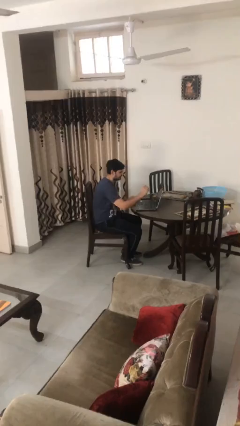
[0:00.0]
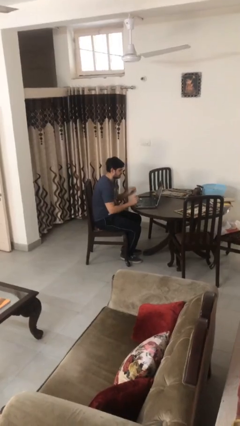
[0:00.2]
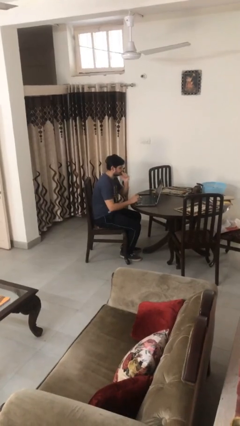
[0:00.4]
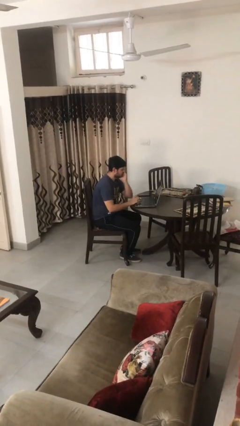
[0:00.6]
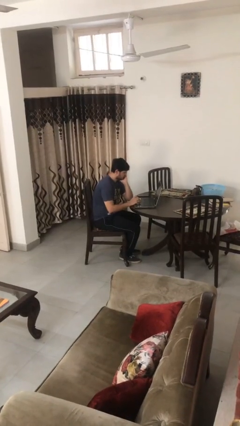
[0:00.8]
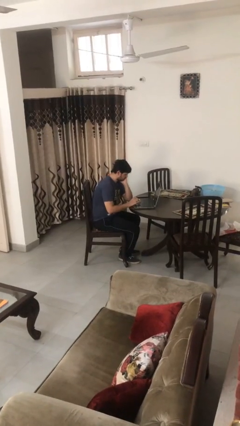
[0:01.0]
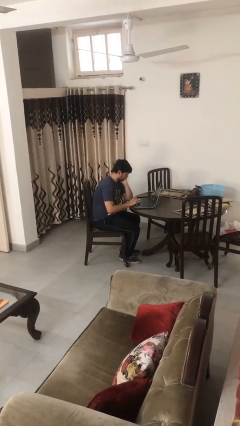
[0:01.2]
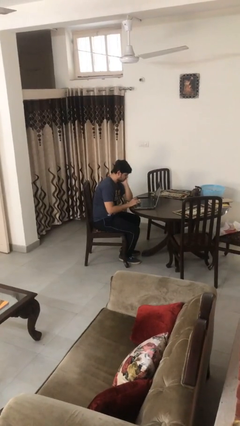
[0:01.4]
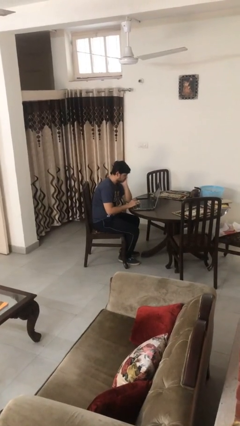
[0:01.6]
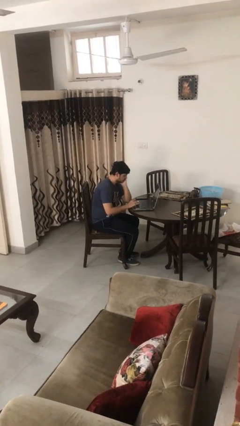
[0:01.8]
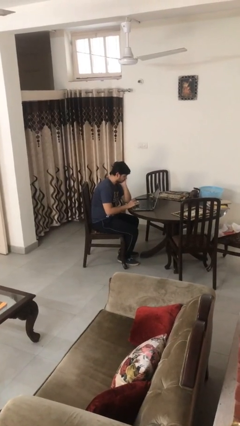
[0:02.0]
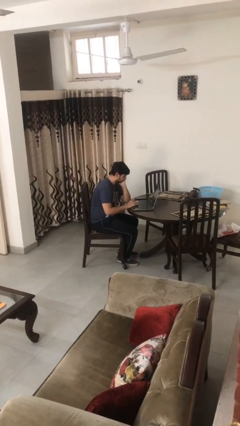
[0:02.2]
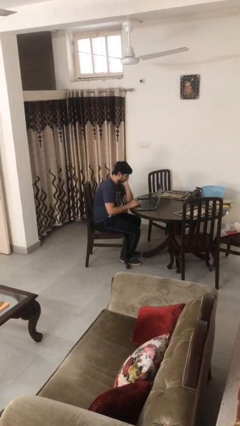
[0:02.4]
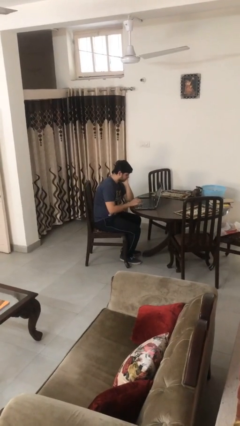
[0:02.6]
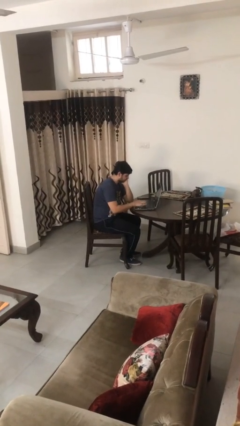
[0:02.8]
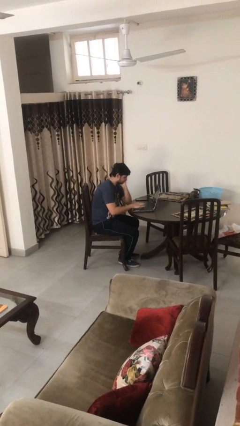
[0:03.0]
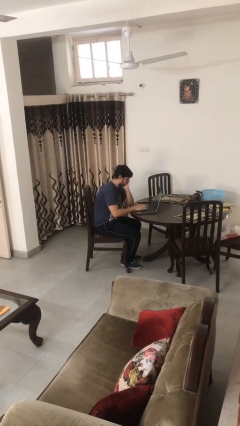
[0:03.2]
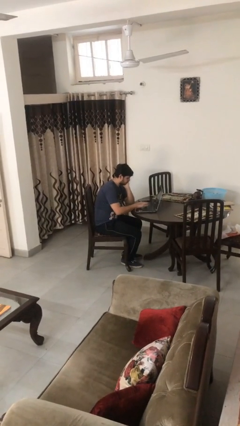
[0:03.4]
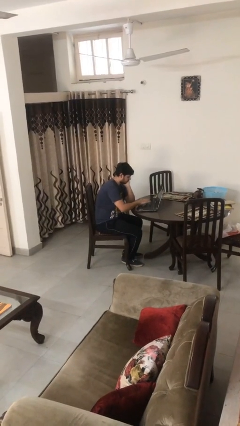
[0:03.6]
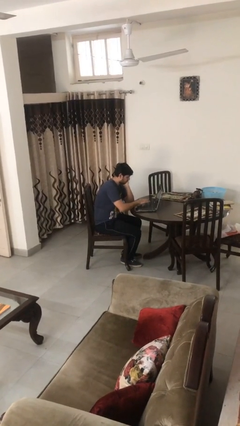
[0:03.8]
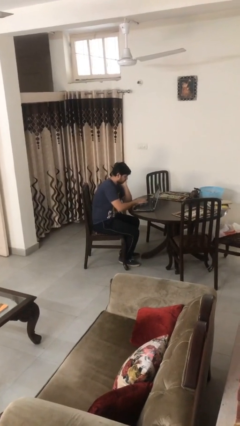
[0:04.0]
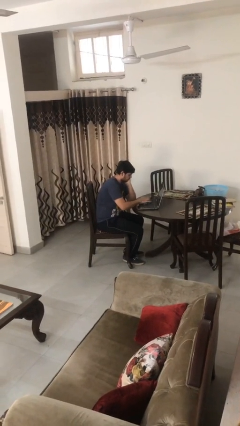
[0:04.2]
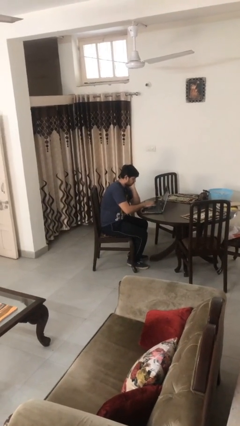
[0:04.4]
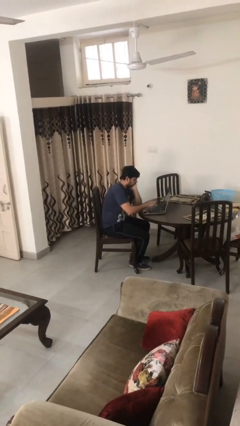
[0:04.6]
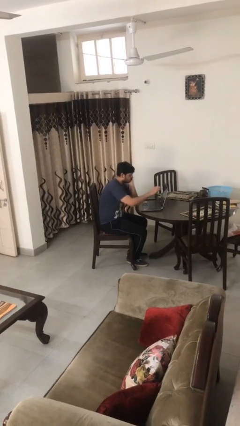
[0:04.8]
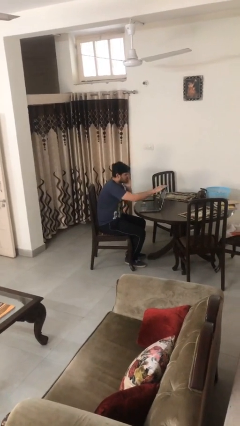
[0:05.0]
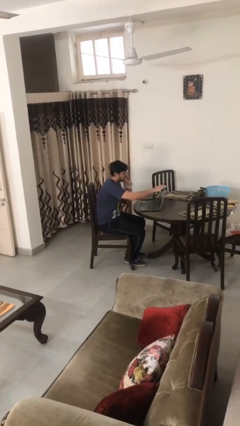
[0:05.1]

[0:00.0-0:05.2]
person interacts with laptop

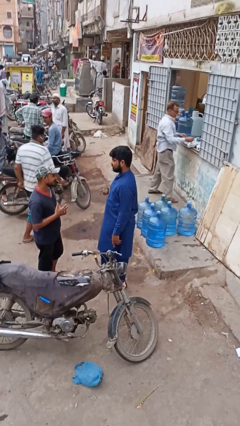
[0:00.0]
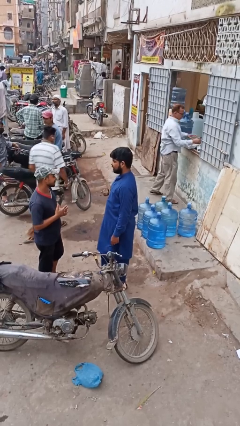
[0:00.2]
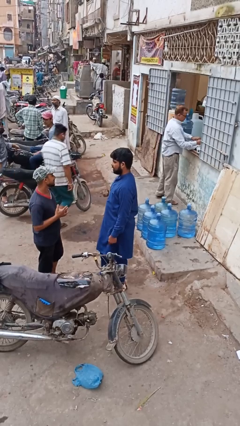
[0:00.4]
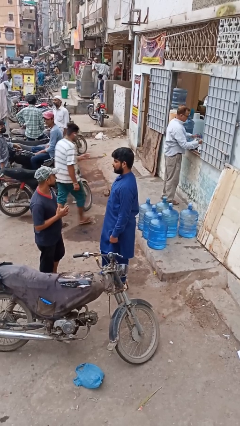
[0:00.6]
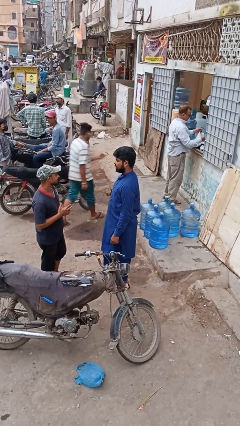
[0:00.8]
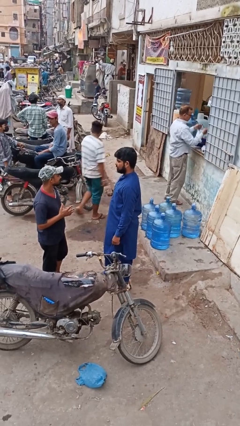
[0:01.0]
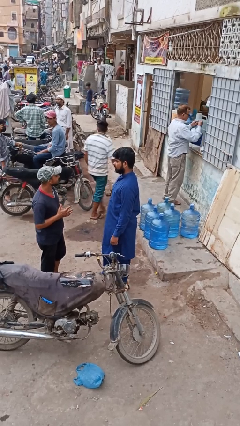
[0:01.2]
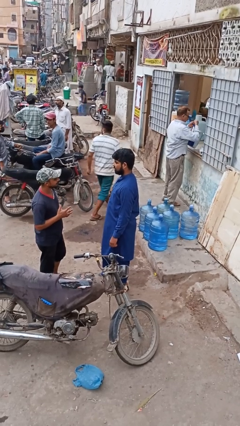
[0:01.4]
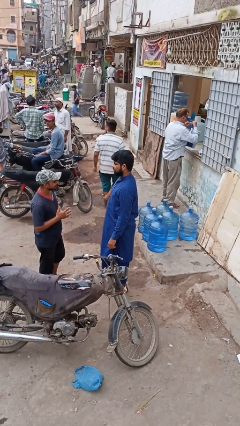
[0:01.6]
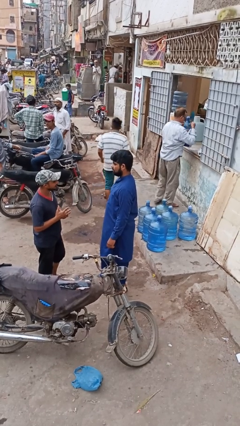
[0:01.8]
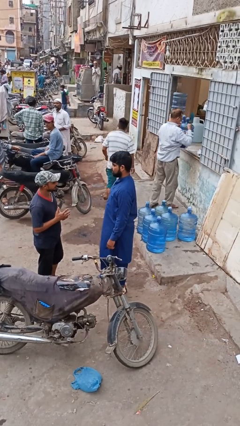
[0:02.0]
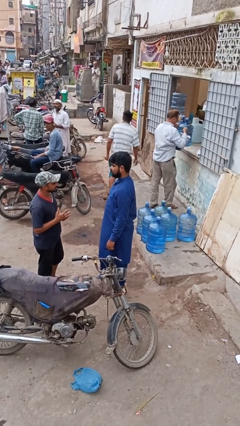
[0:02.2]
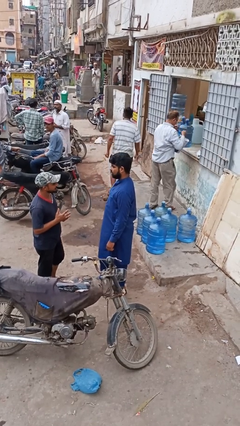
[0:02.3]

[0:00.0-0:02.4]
person talks to person

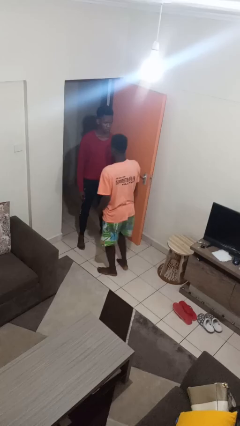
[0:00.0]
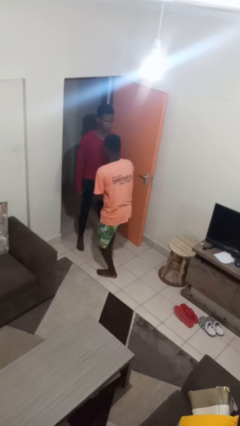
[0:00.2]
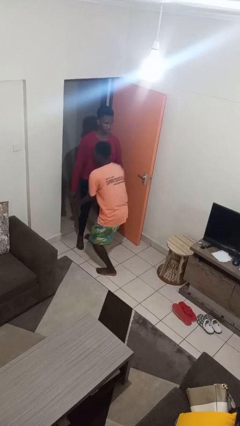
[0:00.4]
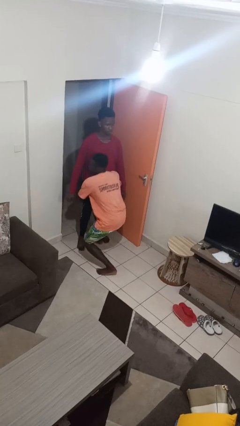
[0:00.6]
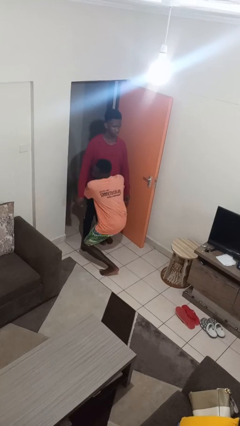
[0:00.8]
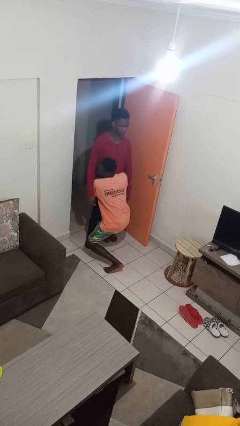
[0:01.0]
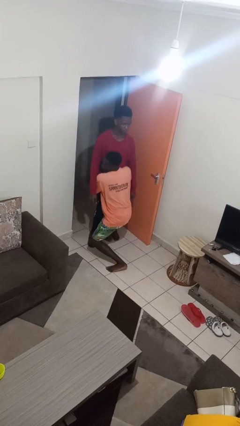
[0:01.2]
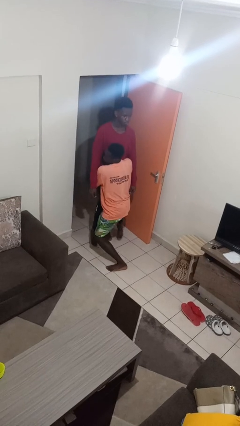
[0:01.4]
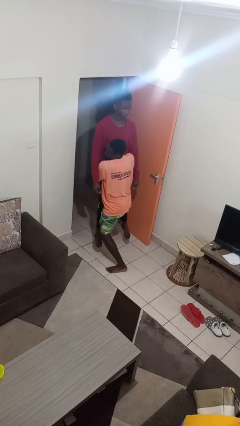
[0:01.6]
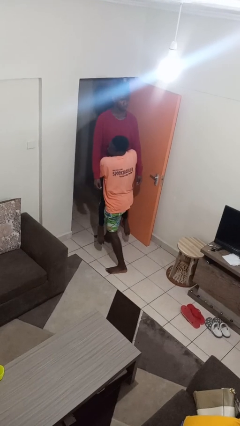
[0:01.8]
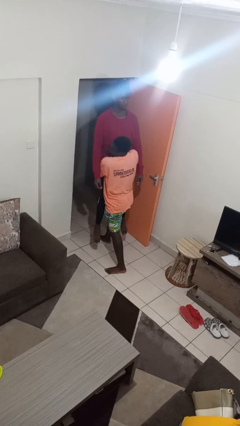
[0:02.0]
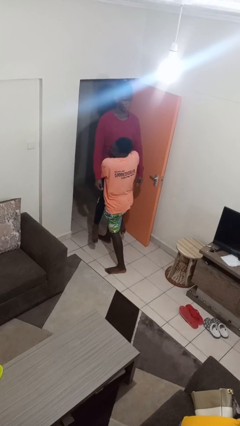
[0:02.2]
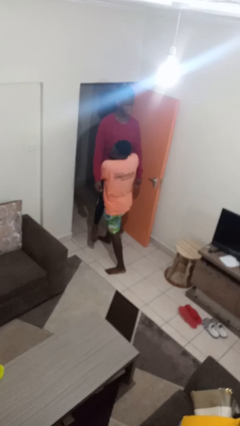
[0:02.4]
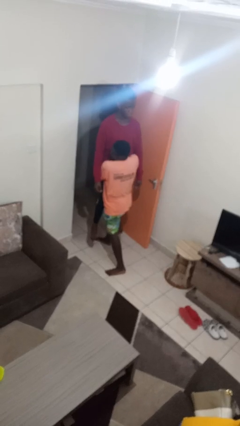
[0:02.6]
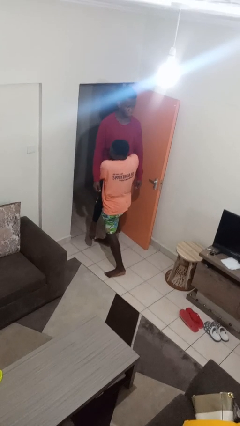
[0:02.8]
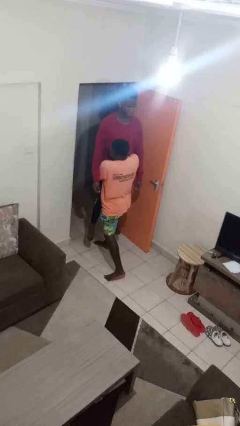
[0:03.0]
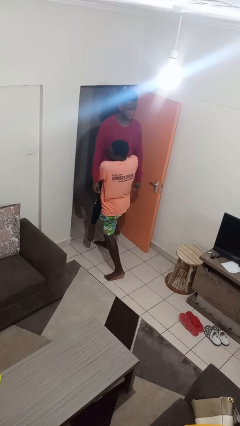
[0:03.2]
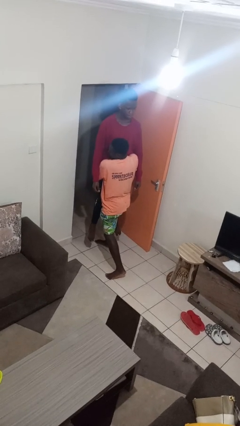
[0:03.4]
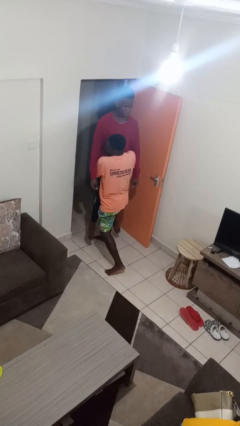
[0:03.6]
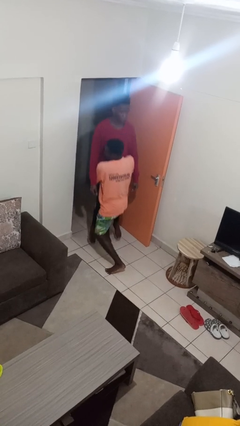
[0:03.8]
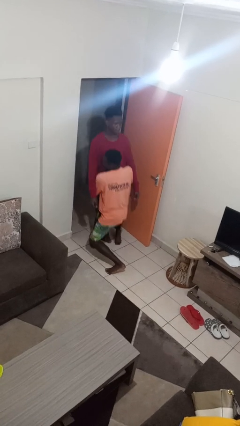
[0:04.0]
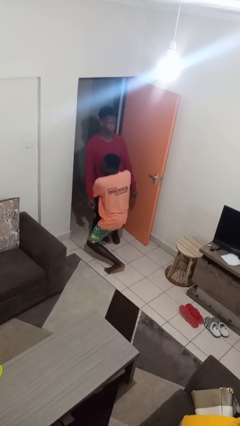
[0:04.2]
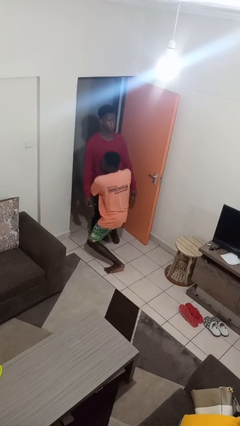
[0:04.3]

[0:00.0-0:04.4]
person picks up person

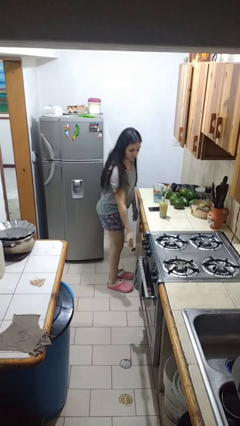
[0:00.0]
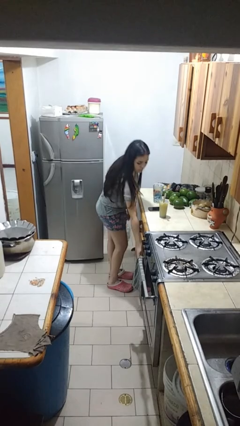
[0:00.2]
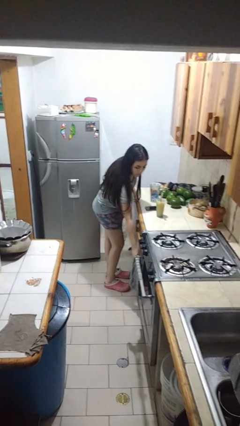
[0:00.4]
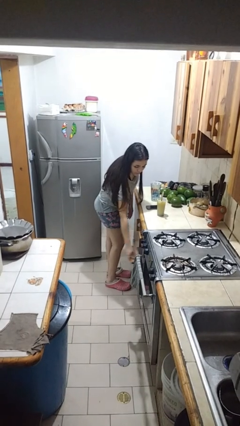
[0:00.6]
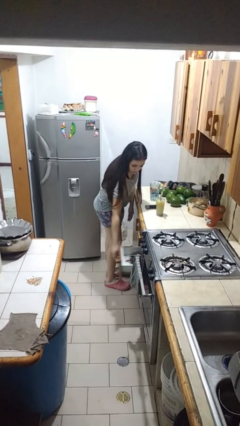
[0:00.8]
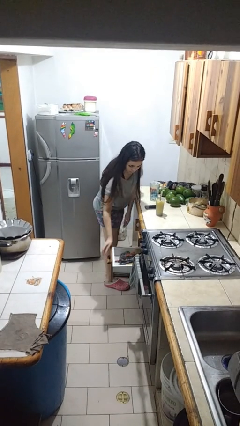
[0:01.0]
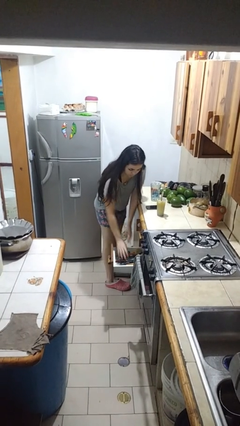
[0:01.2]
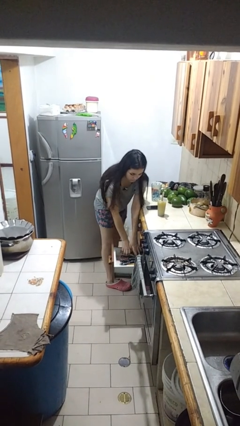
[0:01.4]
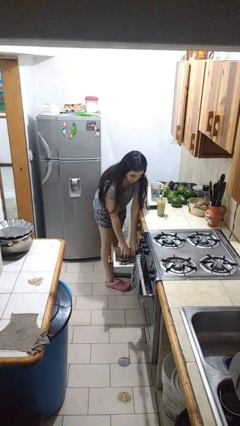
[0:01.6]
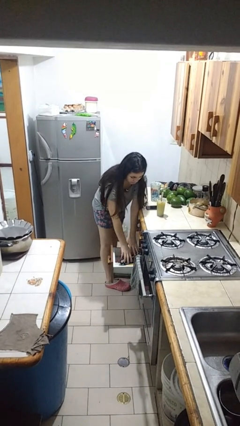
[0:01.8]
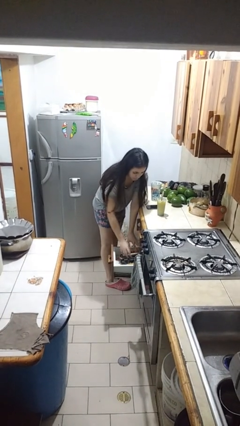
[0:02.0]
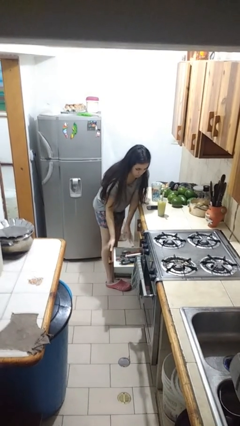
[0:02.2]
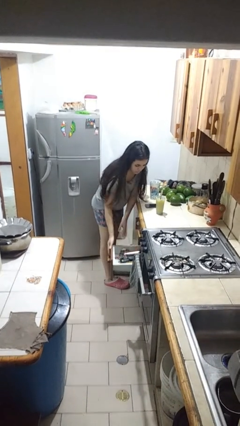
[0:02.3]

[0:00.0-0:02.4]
person searches in kitchen drawer

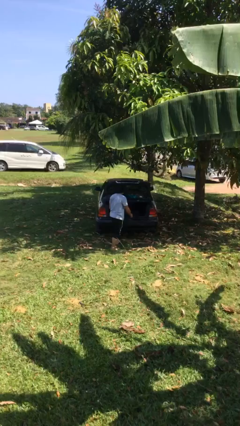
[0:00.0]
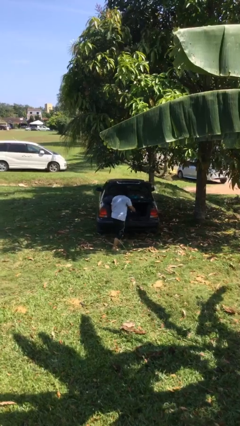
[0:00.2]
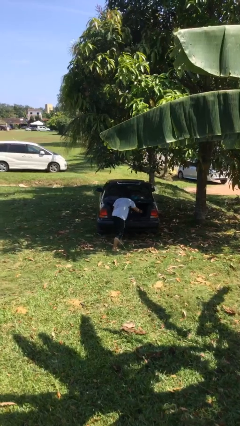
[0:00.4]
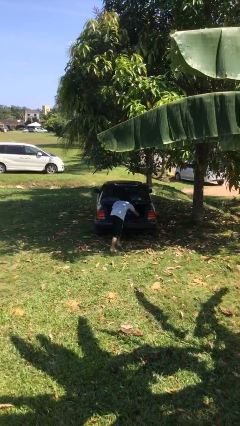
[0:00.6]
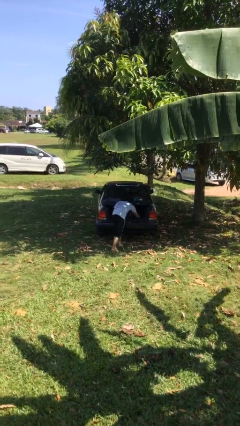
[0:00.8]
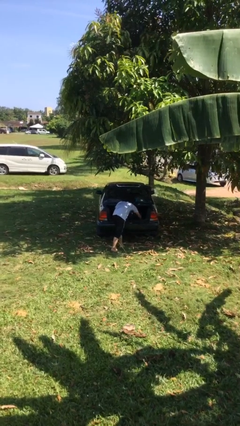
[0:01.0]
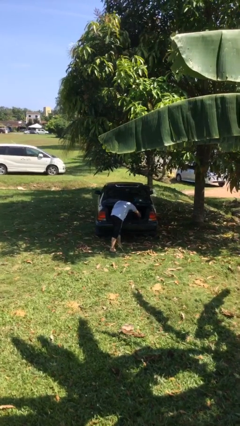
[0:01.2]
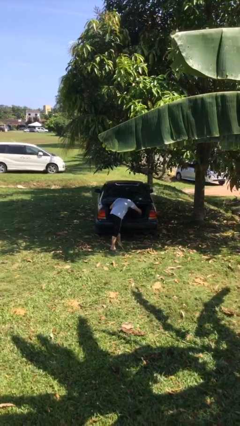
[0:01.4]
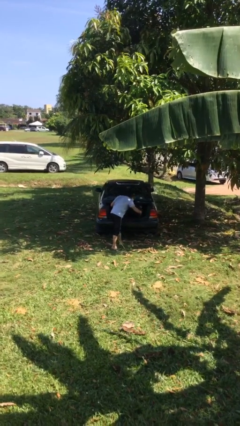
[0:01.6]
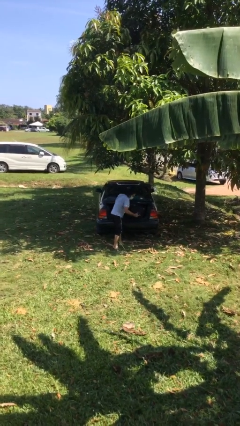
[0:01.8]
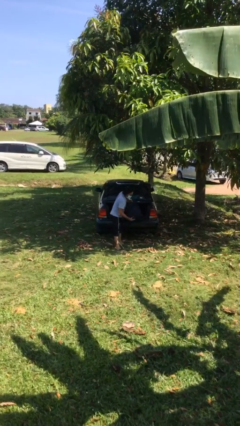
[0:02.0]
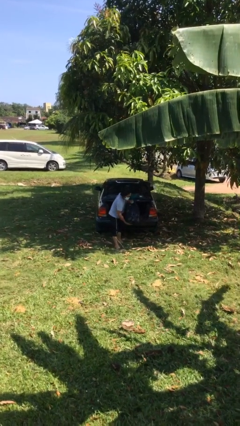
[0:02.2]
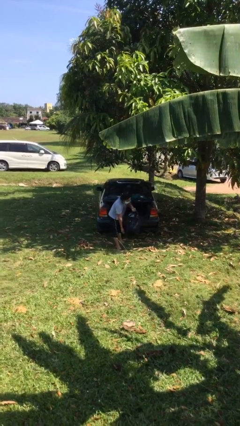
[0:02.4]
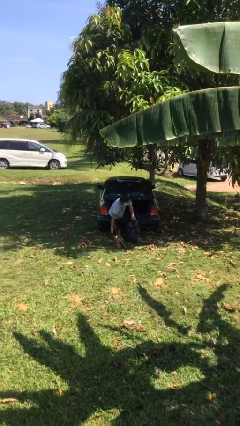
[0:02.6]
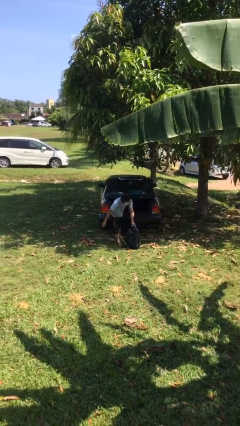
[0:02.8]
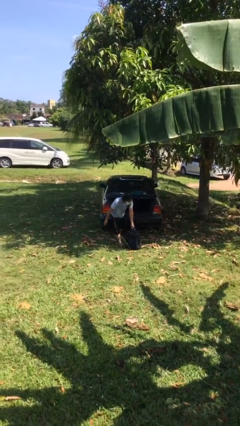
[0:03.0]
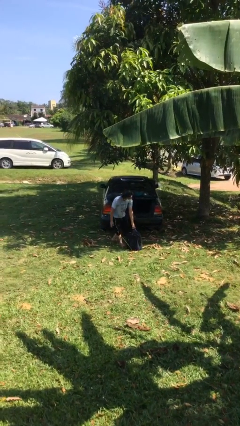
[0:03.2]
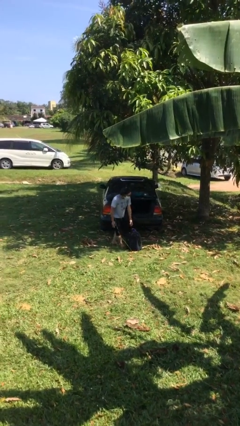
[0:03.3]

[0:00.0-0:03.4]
person unloads car
